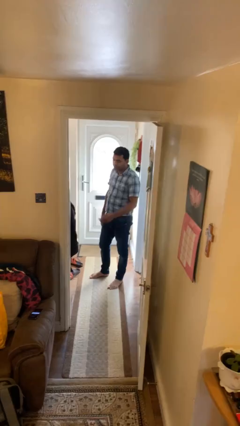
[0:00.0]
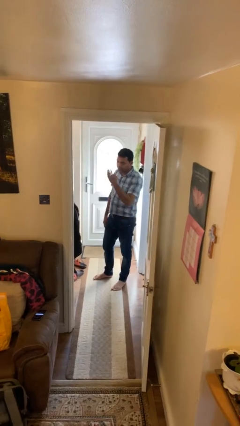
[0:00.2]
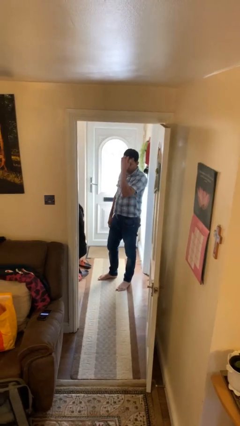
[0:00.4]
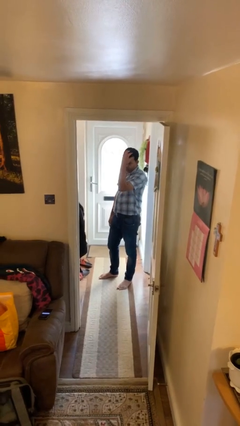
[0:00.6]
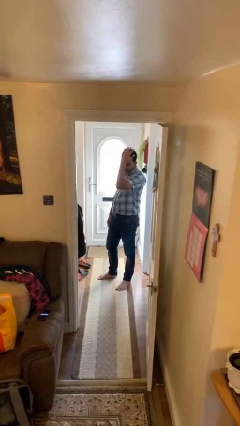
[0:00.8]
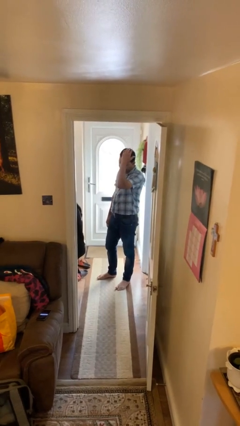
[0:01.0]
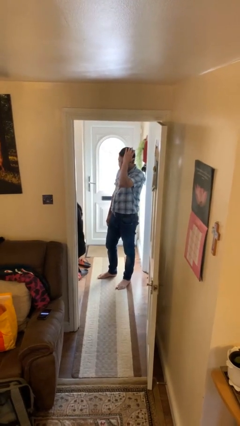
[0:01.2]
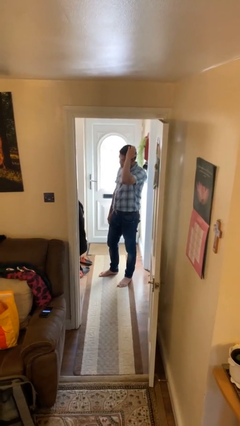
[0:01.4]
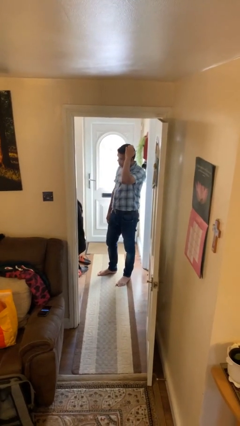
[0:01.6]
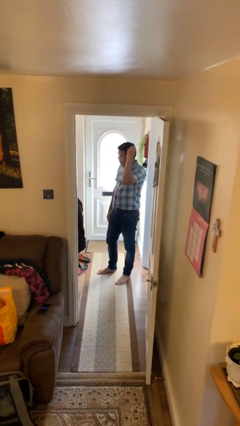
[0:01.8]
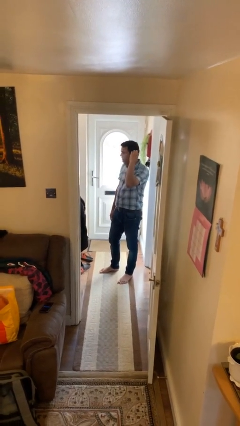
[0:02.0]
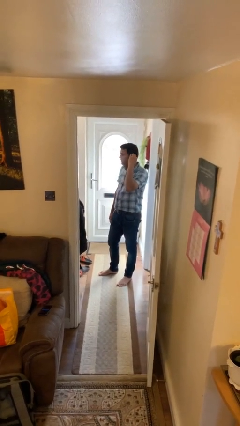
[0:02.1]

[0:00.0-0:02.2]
person strokes hair

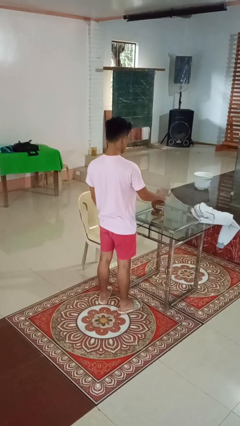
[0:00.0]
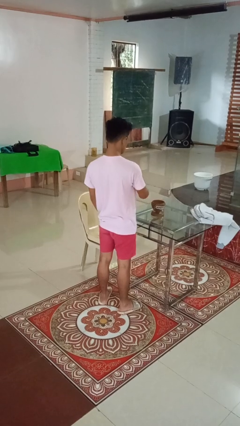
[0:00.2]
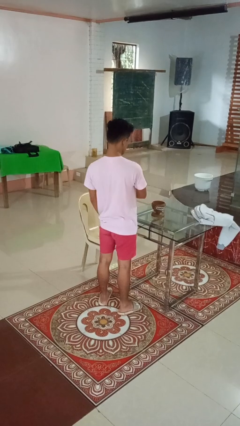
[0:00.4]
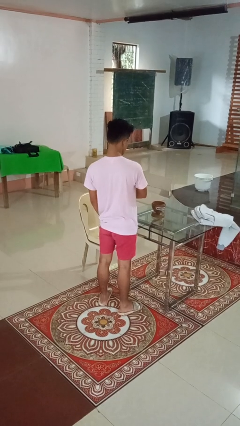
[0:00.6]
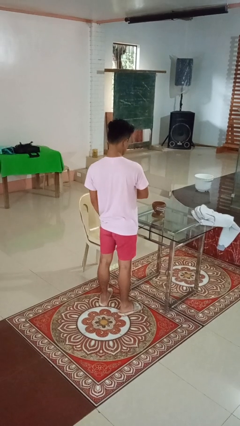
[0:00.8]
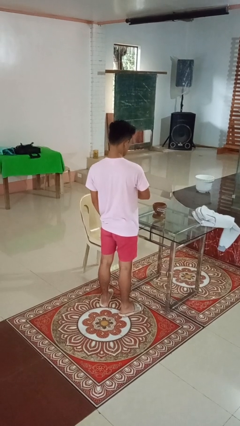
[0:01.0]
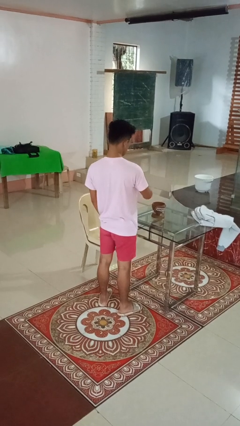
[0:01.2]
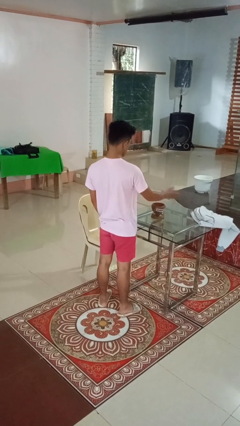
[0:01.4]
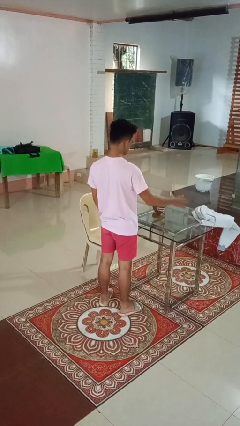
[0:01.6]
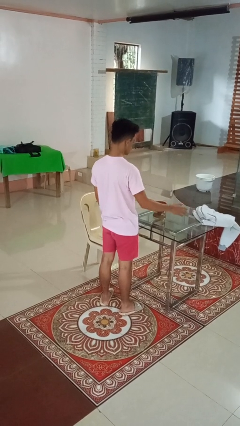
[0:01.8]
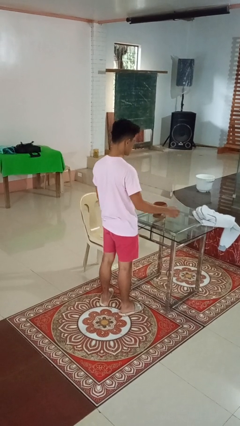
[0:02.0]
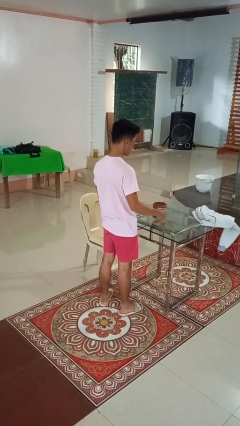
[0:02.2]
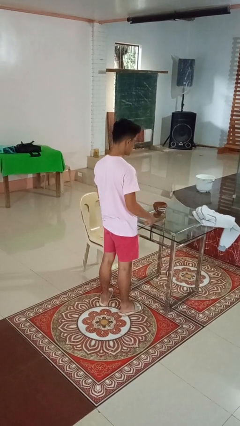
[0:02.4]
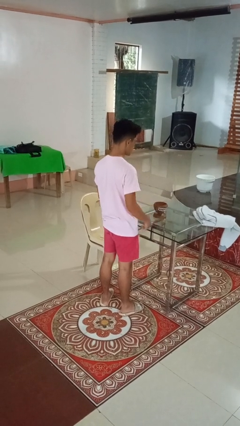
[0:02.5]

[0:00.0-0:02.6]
person waves hand over object

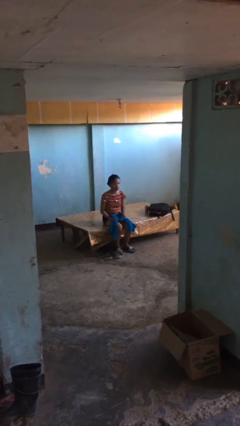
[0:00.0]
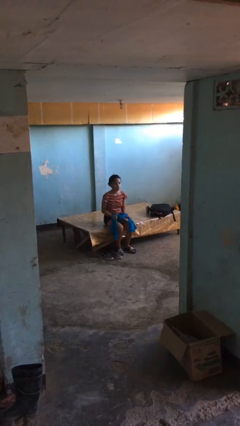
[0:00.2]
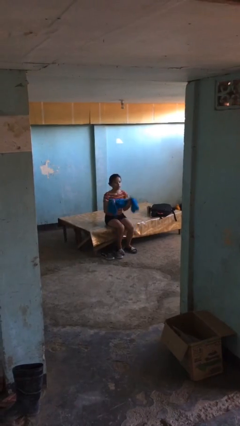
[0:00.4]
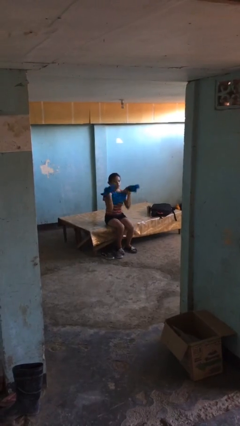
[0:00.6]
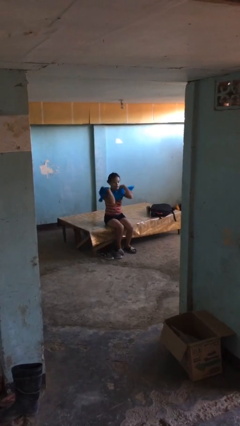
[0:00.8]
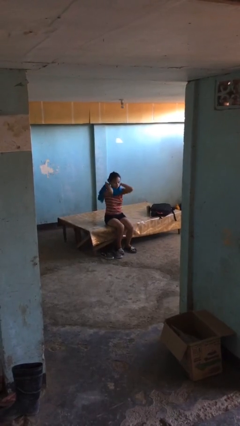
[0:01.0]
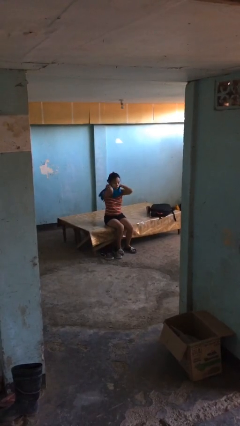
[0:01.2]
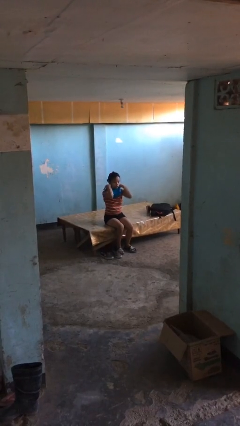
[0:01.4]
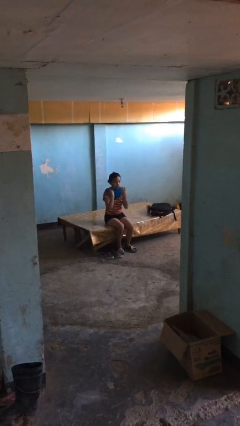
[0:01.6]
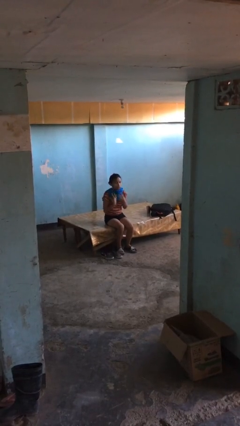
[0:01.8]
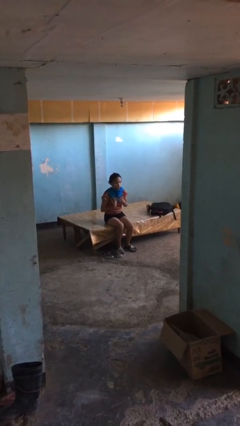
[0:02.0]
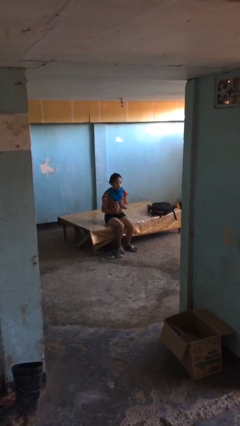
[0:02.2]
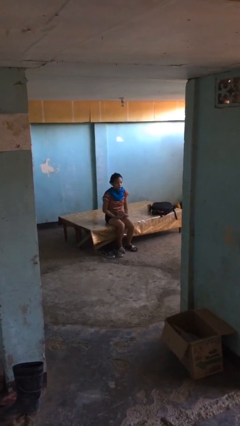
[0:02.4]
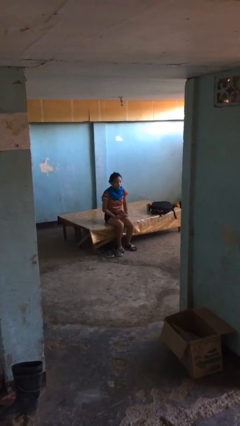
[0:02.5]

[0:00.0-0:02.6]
person puts on scarf

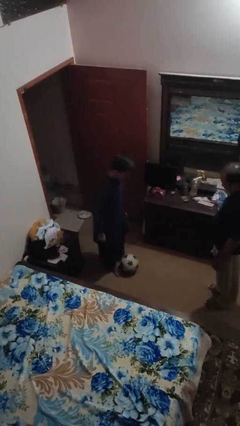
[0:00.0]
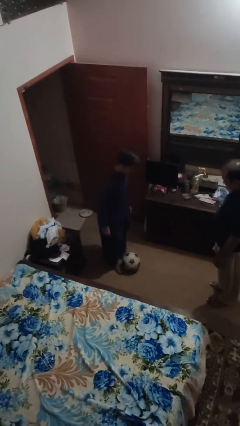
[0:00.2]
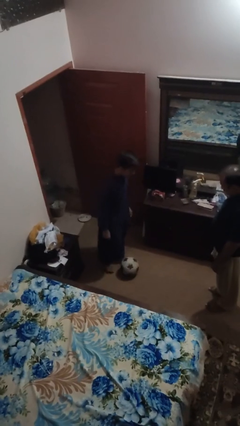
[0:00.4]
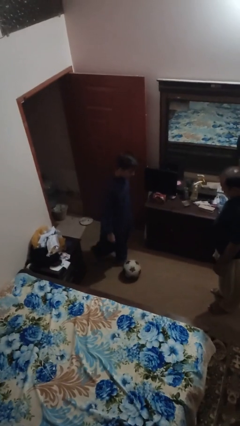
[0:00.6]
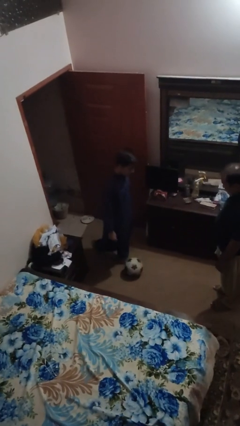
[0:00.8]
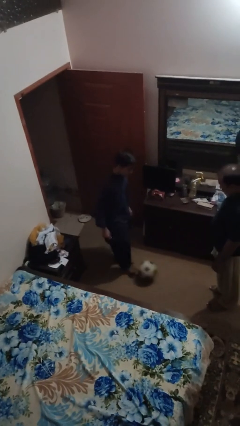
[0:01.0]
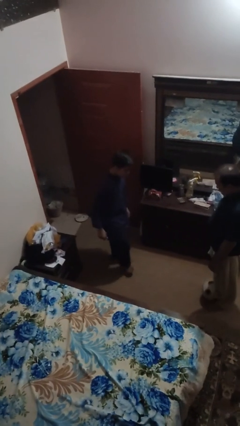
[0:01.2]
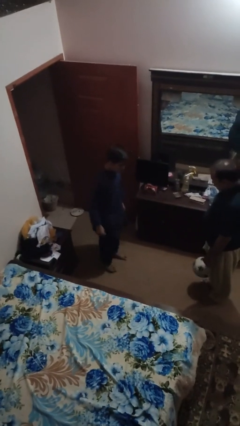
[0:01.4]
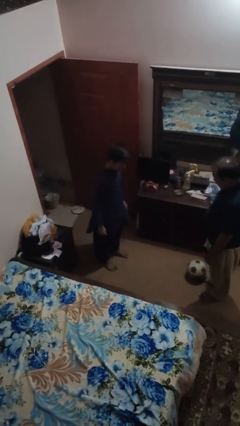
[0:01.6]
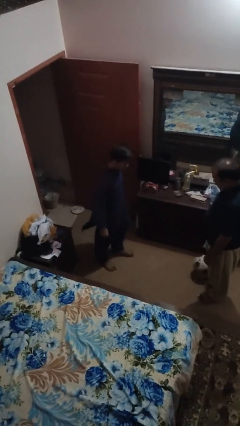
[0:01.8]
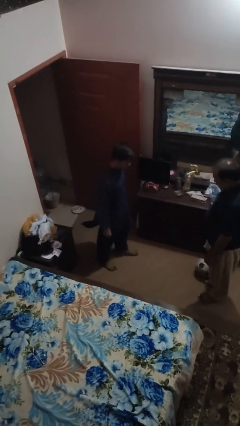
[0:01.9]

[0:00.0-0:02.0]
person kicks object to person

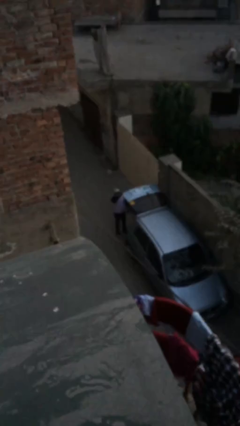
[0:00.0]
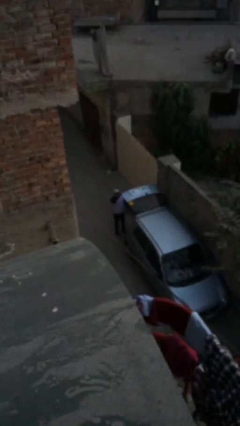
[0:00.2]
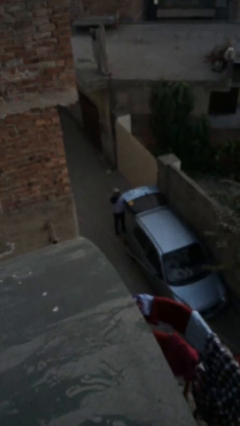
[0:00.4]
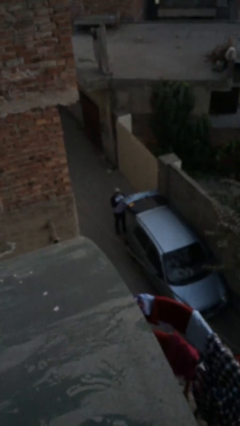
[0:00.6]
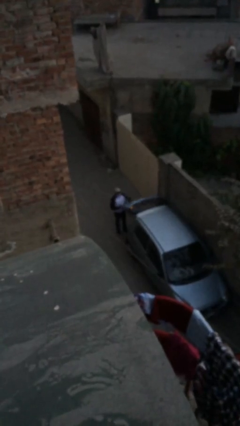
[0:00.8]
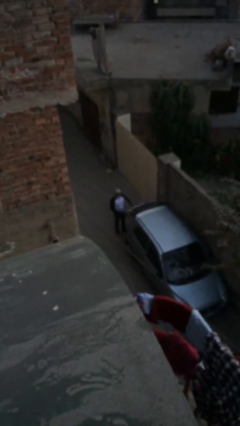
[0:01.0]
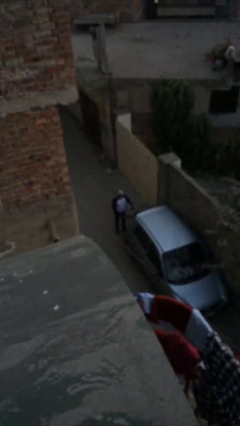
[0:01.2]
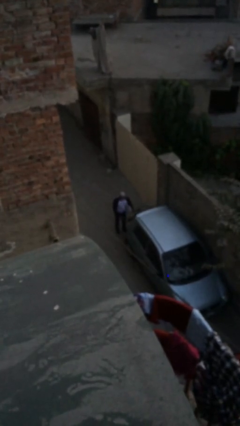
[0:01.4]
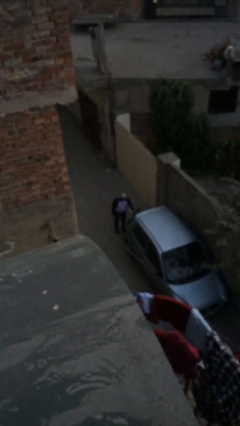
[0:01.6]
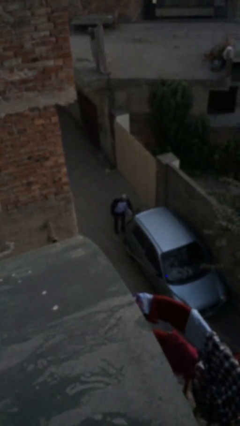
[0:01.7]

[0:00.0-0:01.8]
person closes car trunk

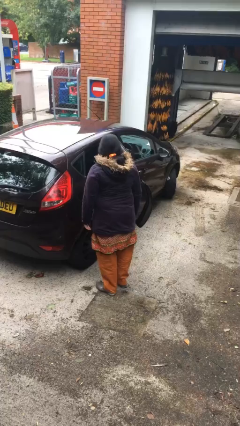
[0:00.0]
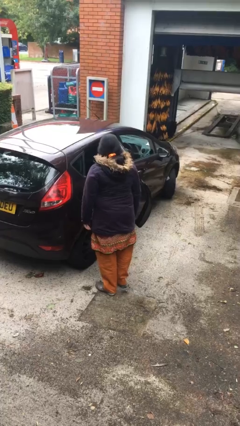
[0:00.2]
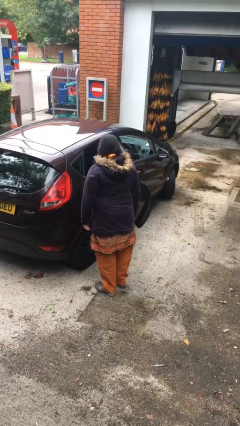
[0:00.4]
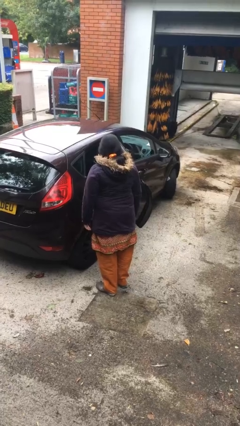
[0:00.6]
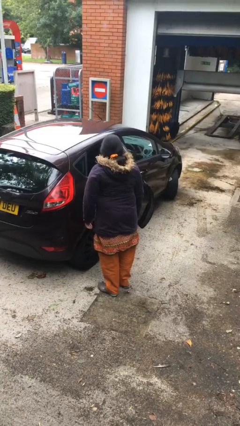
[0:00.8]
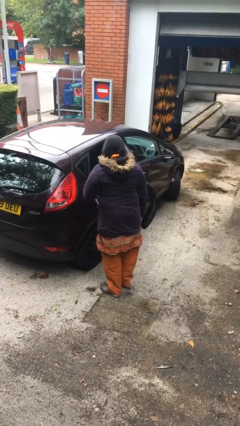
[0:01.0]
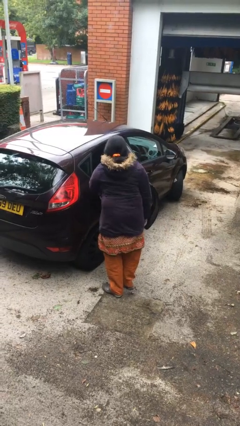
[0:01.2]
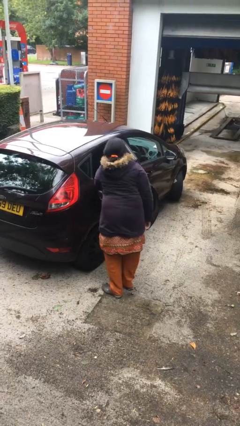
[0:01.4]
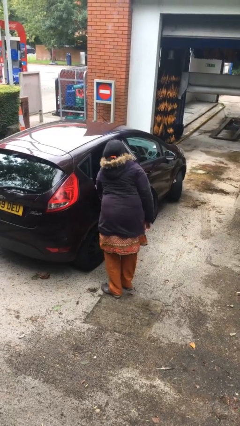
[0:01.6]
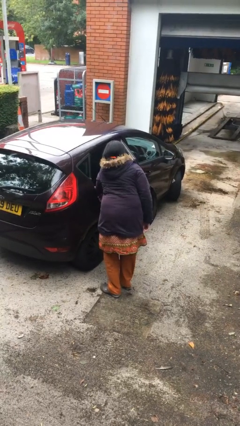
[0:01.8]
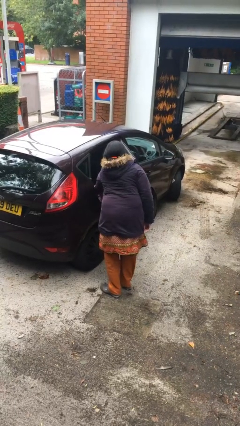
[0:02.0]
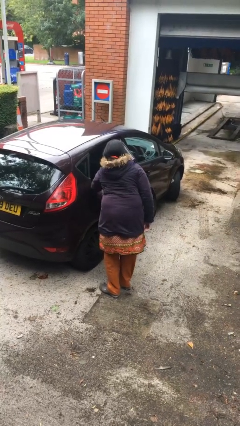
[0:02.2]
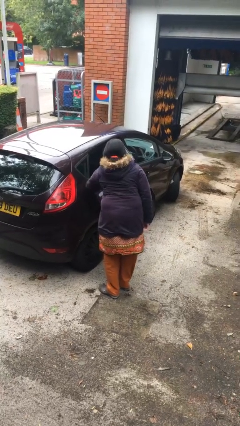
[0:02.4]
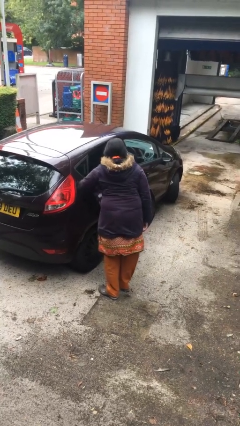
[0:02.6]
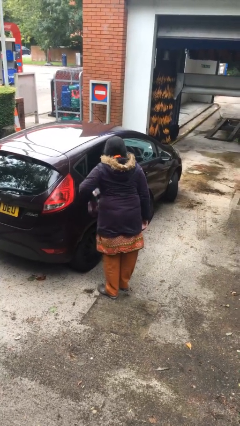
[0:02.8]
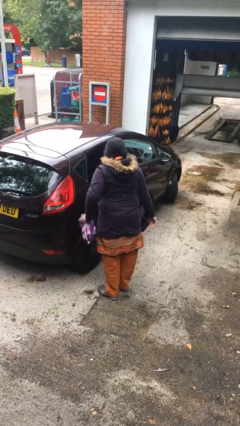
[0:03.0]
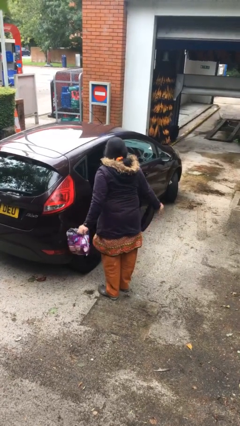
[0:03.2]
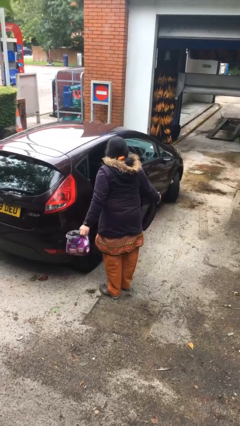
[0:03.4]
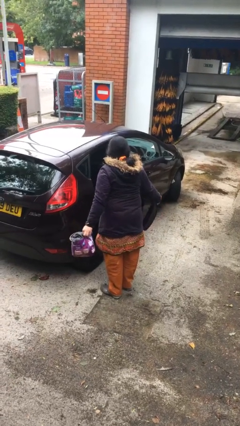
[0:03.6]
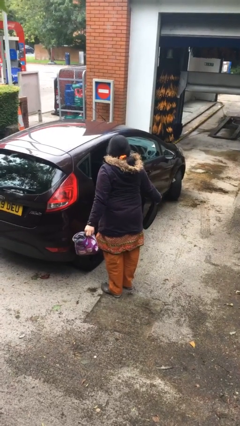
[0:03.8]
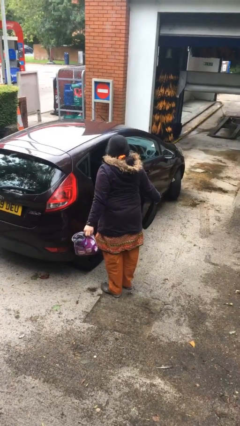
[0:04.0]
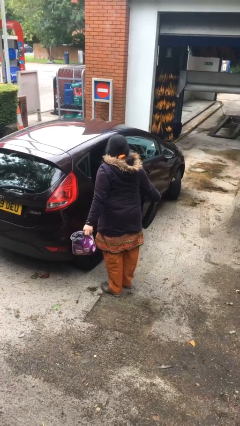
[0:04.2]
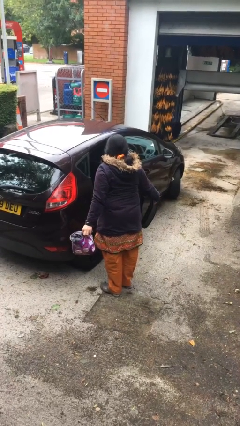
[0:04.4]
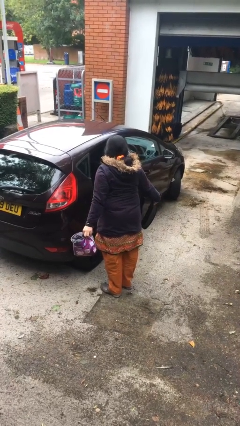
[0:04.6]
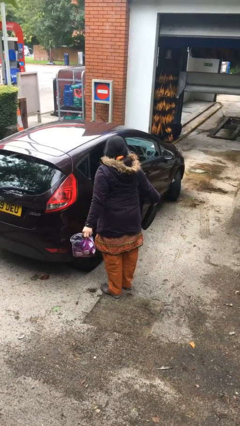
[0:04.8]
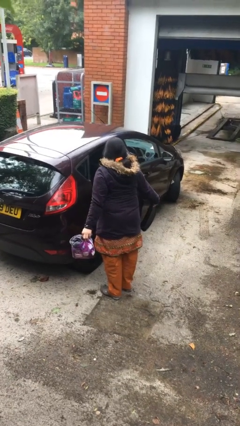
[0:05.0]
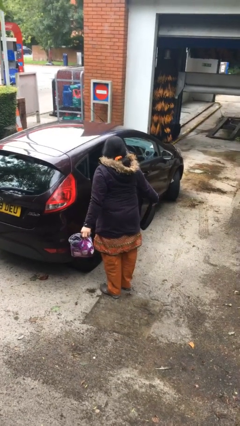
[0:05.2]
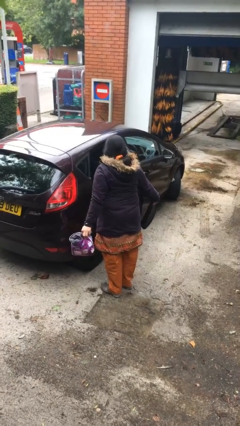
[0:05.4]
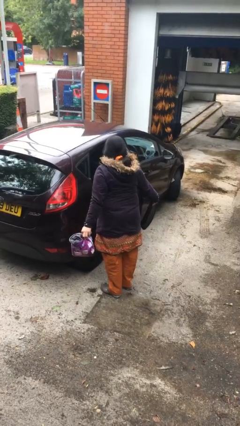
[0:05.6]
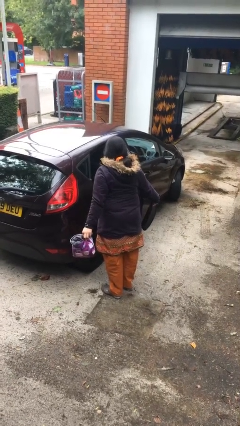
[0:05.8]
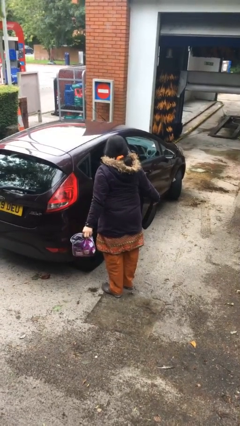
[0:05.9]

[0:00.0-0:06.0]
person unloads car
